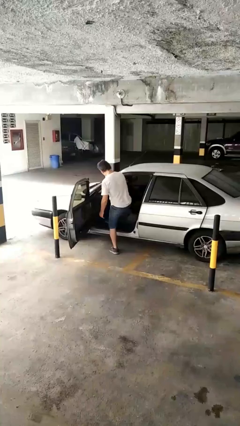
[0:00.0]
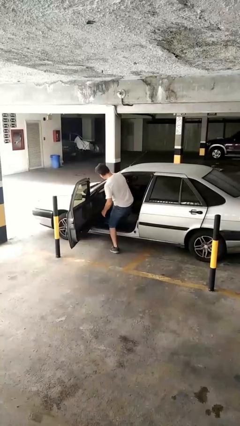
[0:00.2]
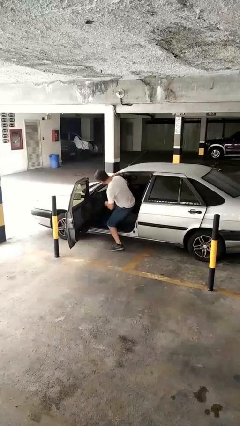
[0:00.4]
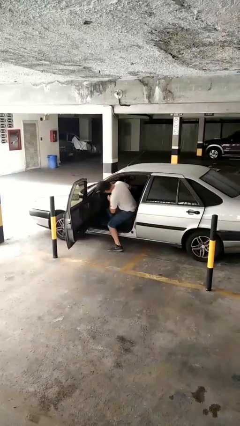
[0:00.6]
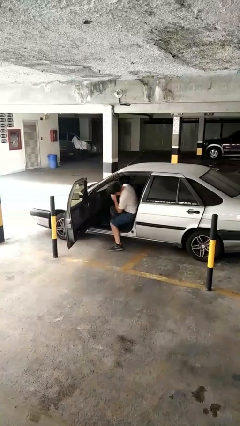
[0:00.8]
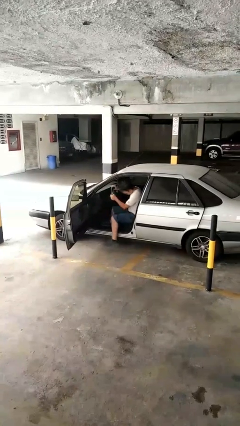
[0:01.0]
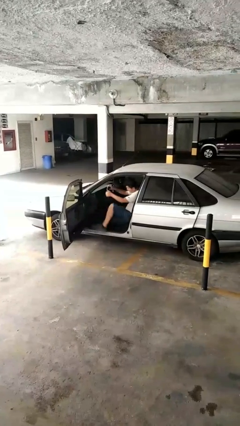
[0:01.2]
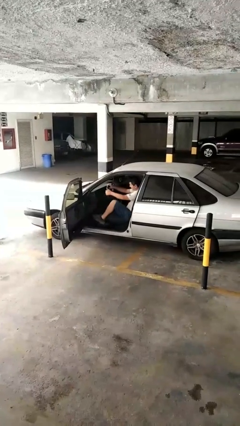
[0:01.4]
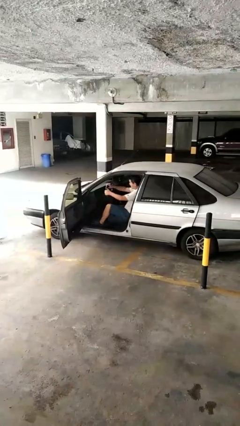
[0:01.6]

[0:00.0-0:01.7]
person enters car

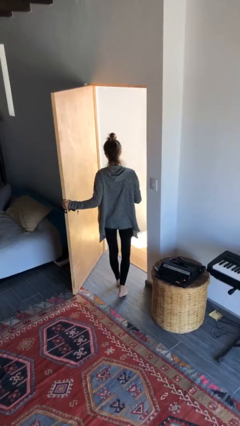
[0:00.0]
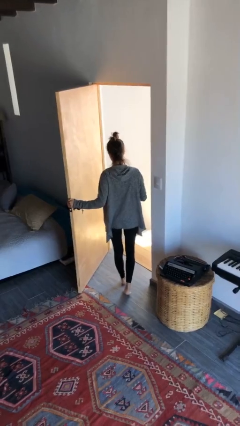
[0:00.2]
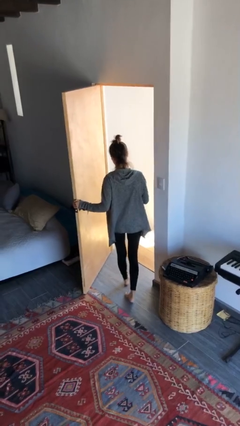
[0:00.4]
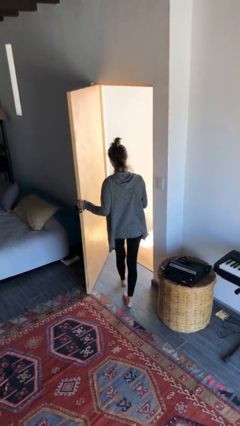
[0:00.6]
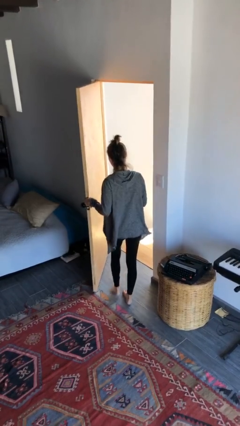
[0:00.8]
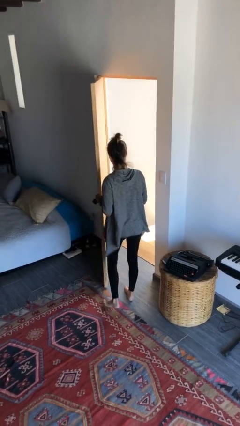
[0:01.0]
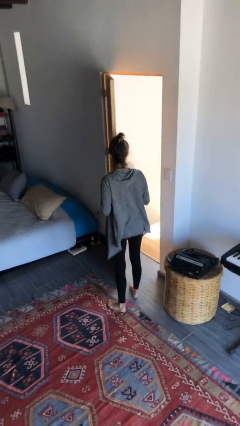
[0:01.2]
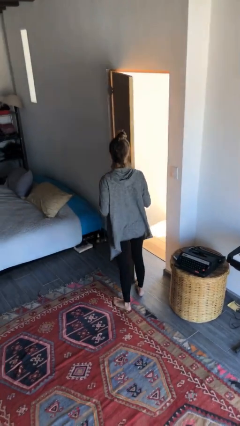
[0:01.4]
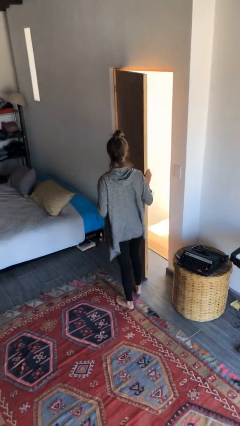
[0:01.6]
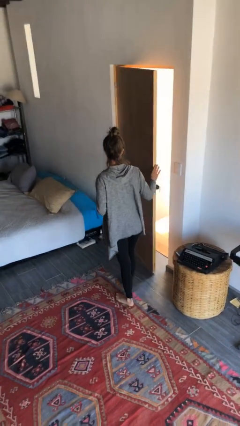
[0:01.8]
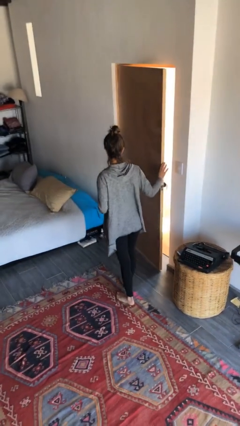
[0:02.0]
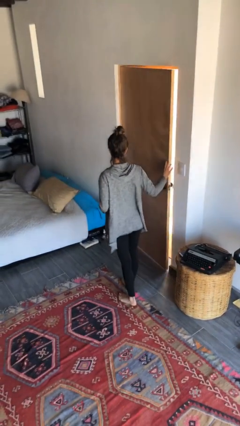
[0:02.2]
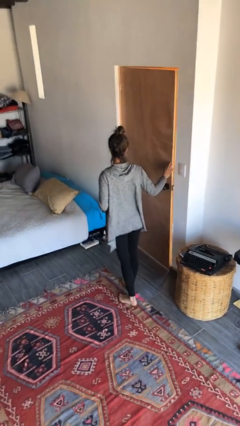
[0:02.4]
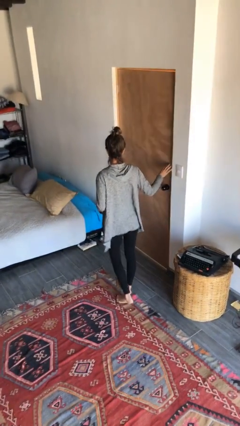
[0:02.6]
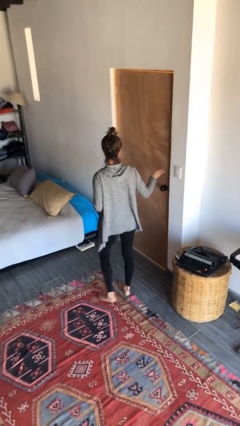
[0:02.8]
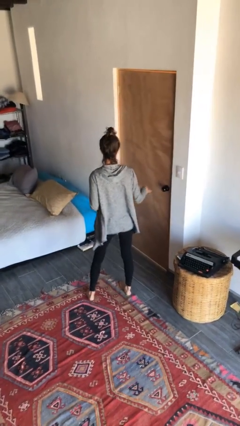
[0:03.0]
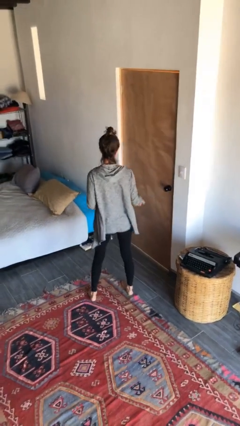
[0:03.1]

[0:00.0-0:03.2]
person closes facility door

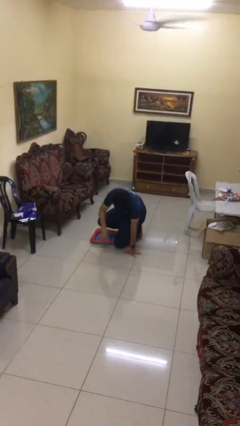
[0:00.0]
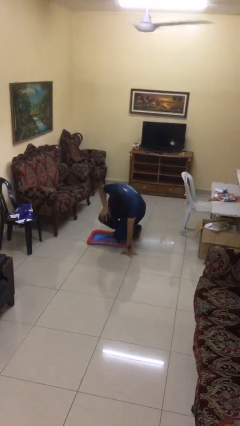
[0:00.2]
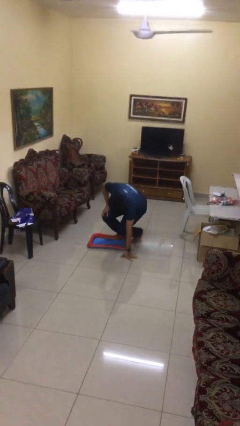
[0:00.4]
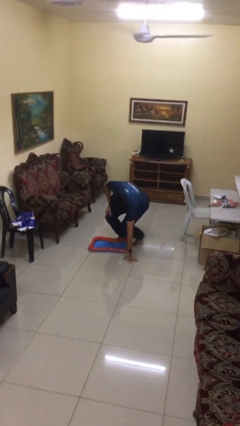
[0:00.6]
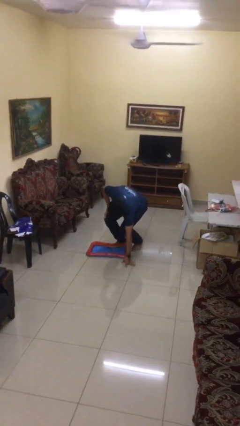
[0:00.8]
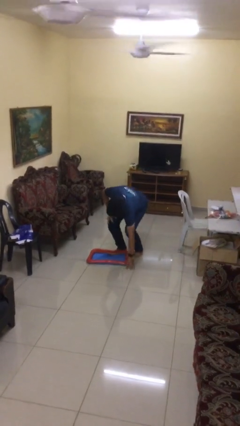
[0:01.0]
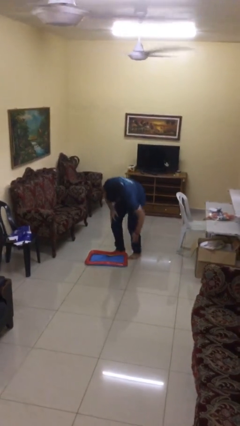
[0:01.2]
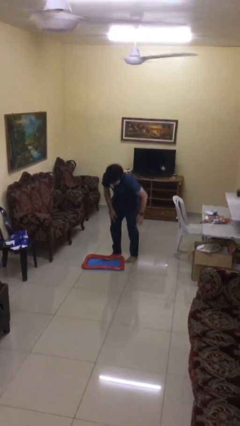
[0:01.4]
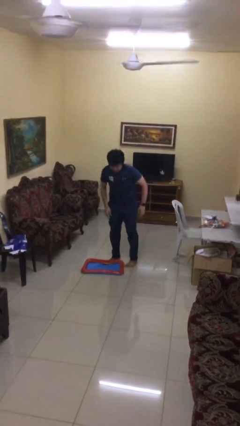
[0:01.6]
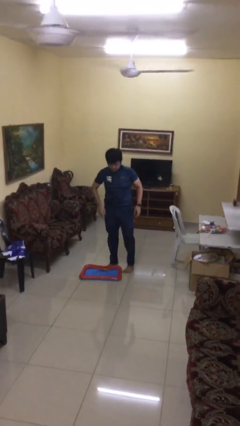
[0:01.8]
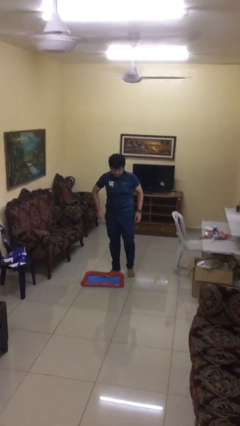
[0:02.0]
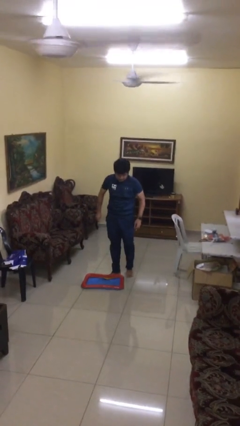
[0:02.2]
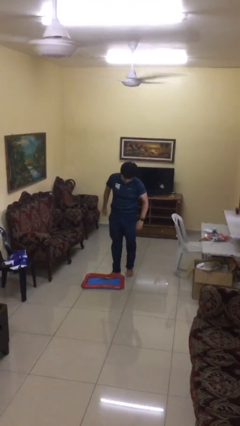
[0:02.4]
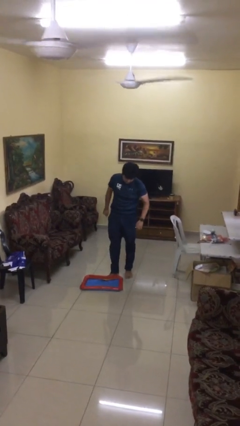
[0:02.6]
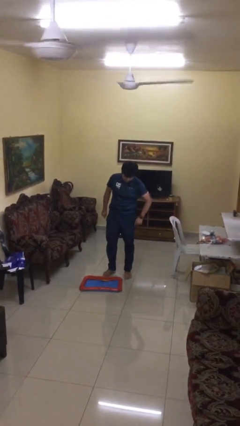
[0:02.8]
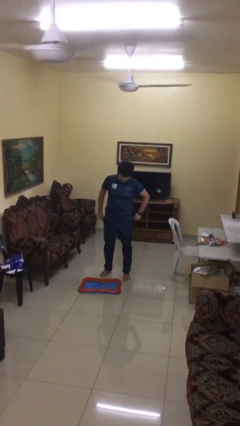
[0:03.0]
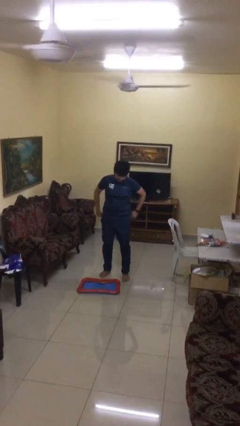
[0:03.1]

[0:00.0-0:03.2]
person stands up from floor

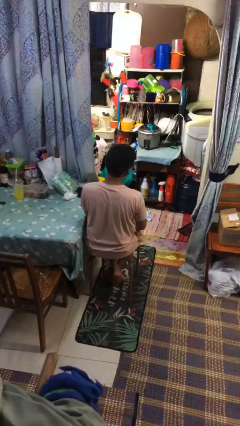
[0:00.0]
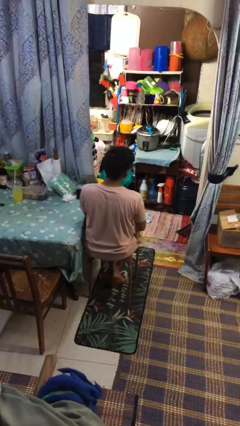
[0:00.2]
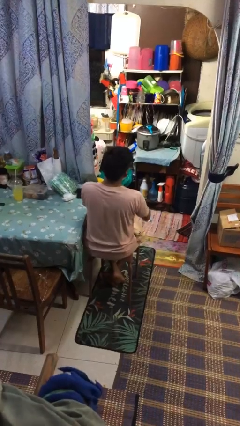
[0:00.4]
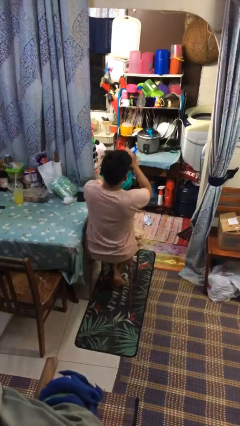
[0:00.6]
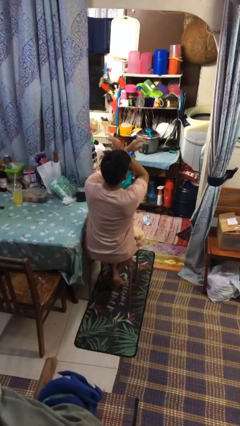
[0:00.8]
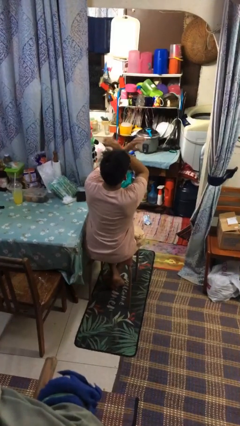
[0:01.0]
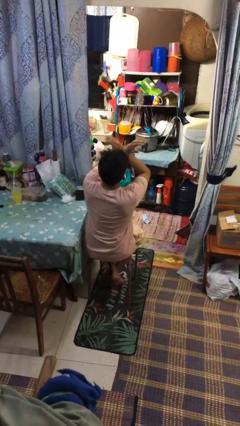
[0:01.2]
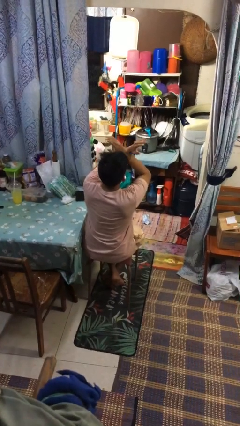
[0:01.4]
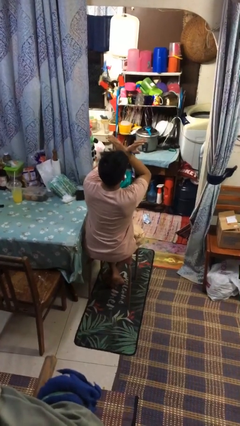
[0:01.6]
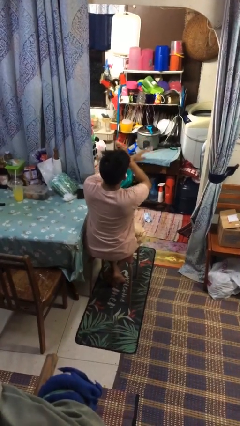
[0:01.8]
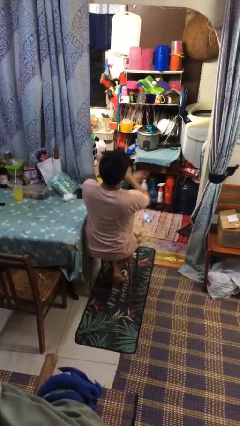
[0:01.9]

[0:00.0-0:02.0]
person gestures arms x

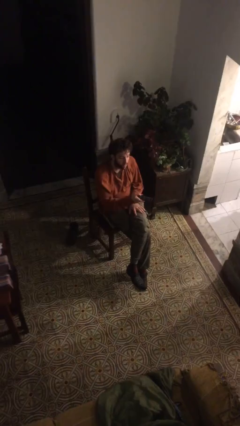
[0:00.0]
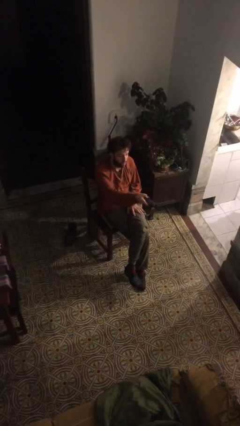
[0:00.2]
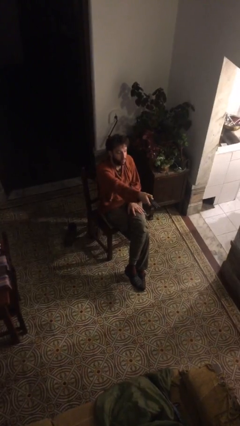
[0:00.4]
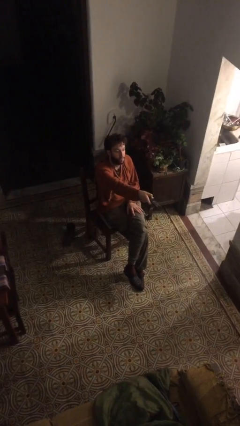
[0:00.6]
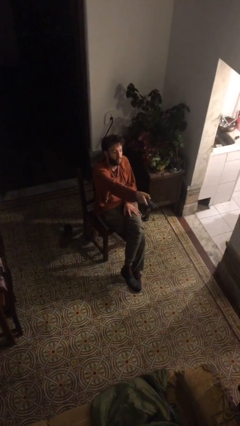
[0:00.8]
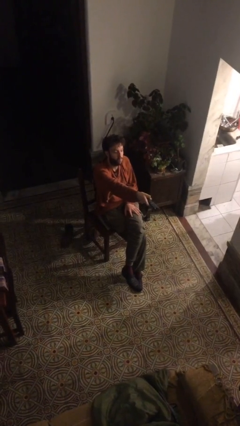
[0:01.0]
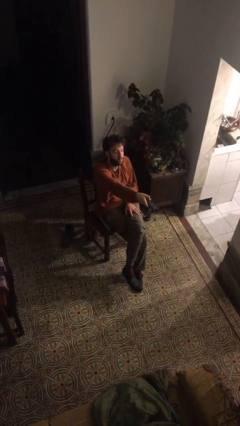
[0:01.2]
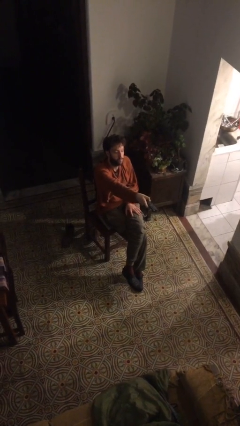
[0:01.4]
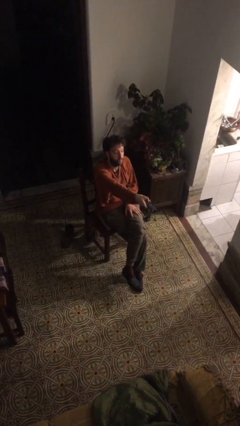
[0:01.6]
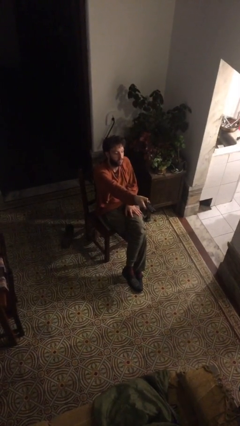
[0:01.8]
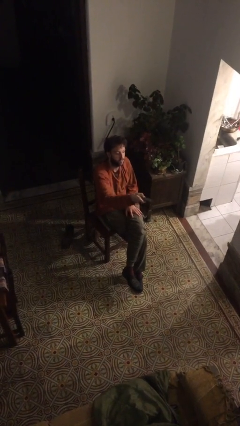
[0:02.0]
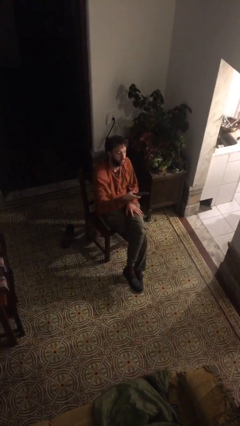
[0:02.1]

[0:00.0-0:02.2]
person uses television remote

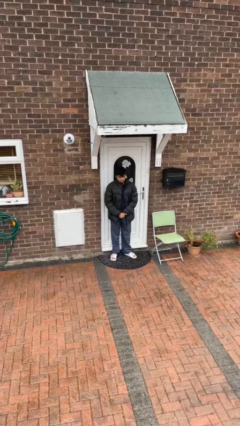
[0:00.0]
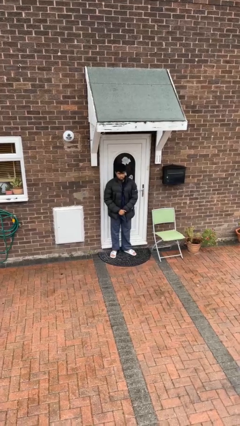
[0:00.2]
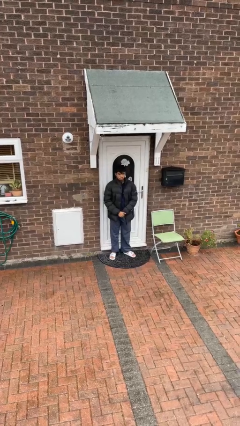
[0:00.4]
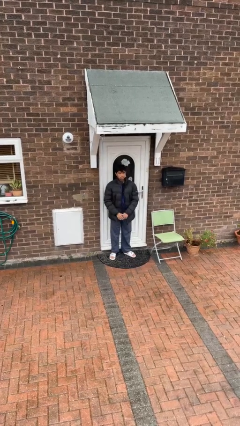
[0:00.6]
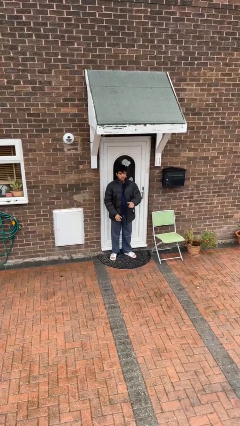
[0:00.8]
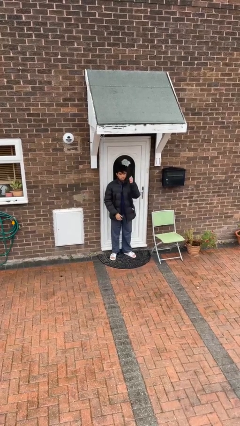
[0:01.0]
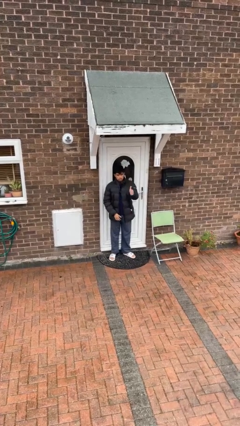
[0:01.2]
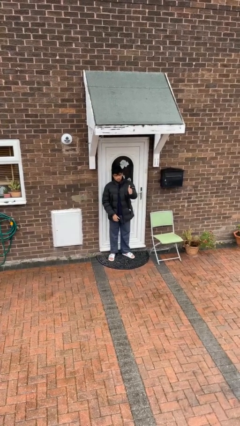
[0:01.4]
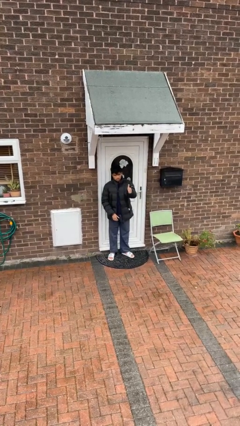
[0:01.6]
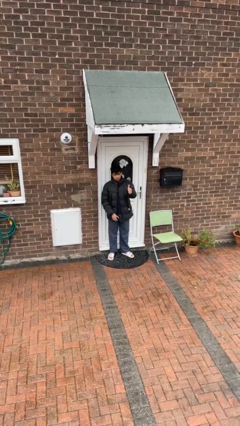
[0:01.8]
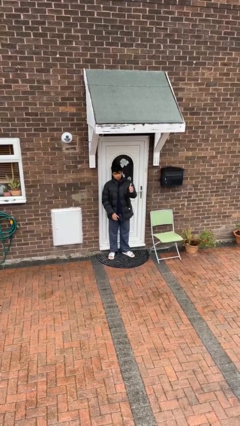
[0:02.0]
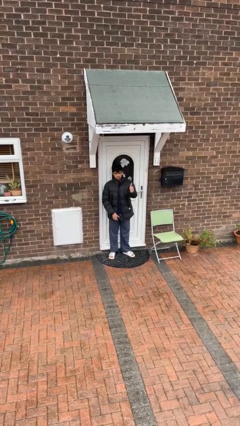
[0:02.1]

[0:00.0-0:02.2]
person gestures thumbs up

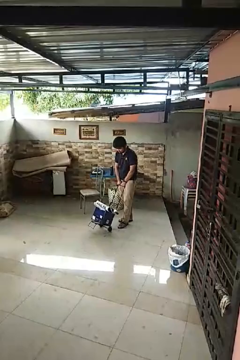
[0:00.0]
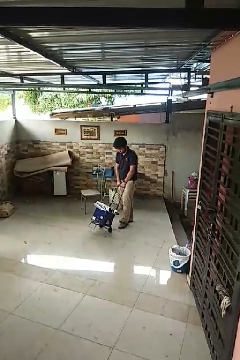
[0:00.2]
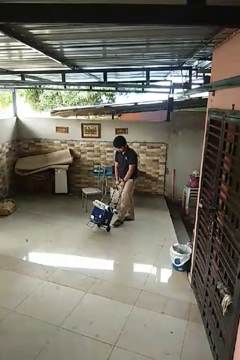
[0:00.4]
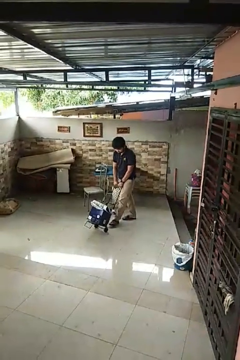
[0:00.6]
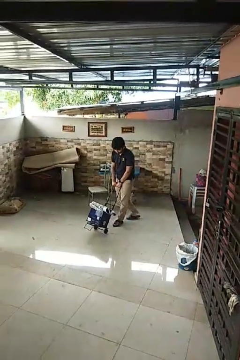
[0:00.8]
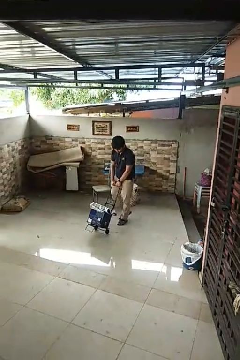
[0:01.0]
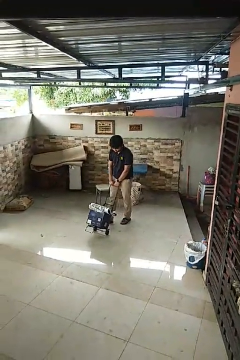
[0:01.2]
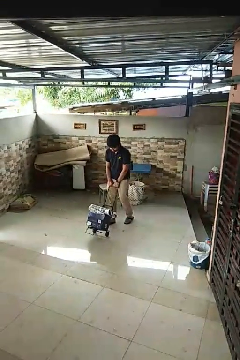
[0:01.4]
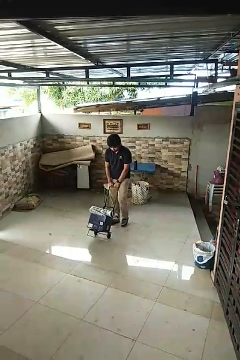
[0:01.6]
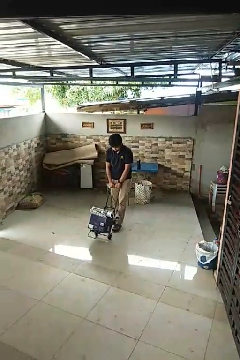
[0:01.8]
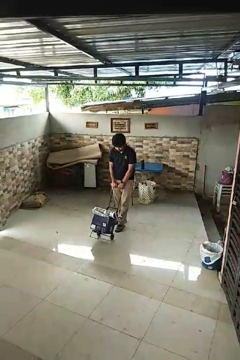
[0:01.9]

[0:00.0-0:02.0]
person pushes wheeled cart

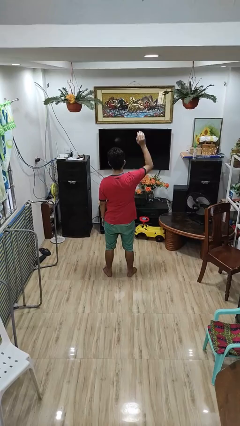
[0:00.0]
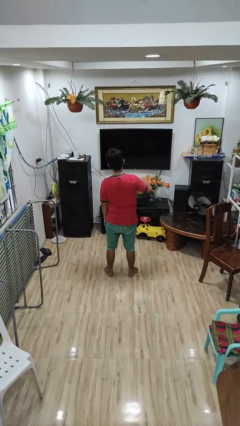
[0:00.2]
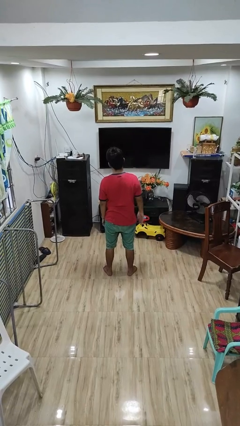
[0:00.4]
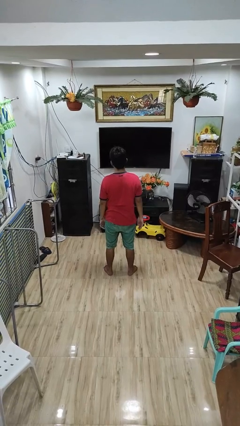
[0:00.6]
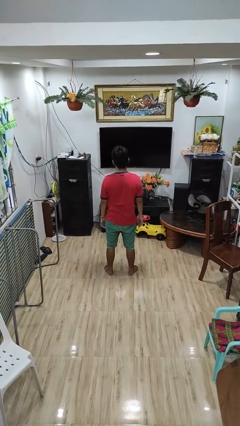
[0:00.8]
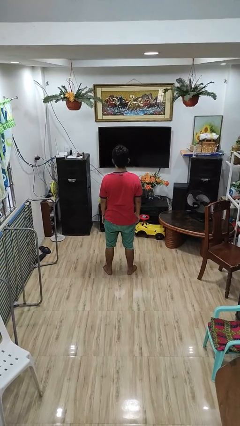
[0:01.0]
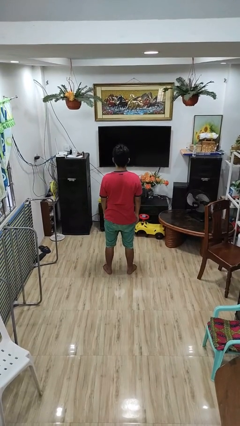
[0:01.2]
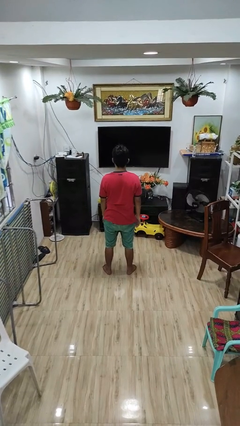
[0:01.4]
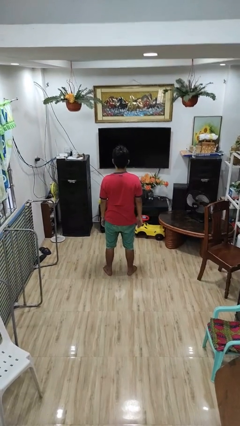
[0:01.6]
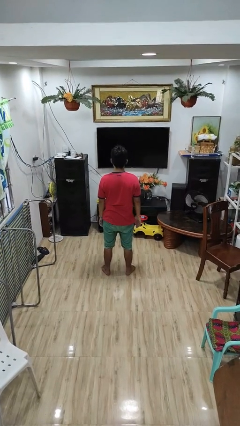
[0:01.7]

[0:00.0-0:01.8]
person gestures lower hand
